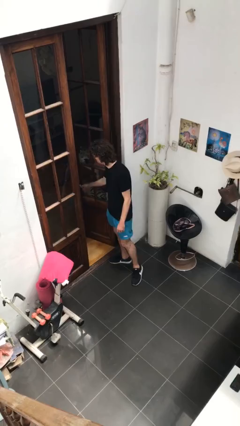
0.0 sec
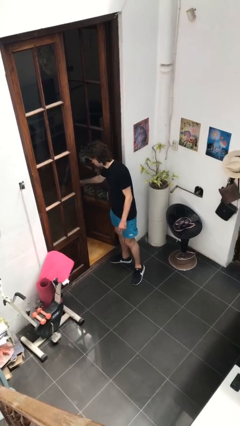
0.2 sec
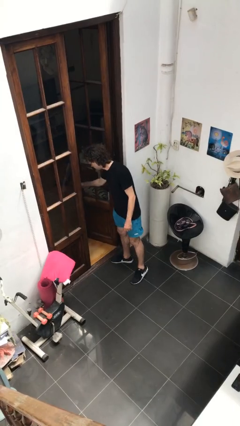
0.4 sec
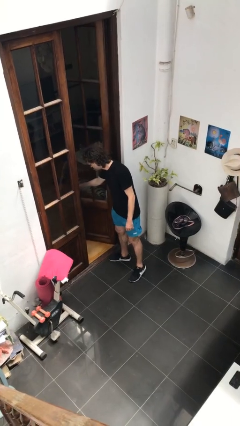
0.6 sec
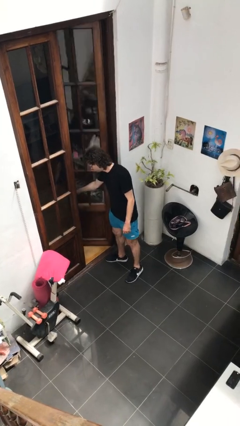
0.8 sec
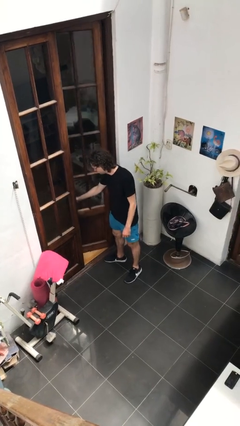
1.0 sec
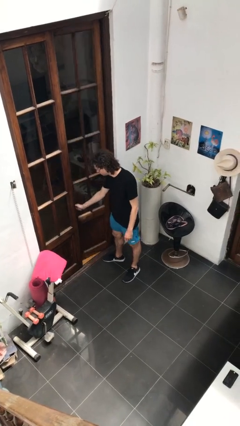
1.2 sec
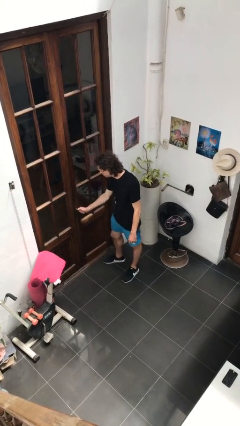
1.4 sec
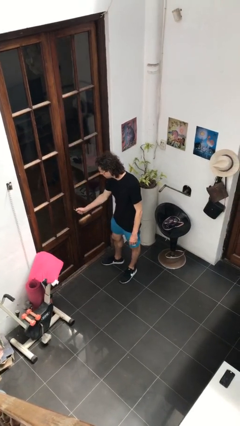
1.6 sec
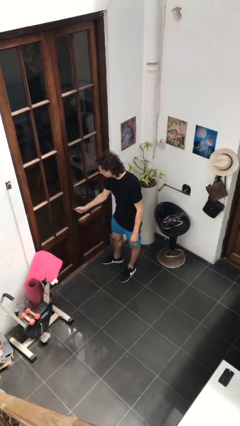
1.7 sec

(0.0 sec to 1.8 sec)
person closes facility door

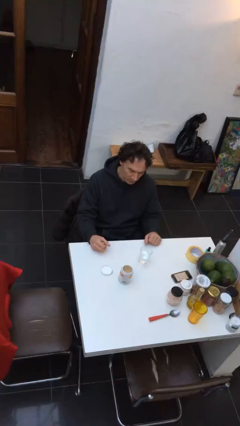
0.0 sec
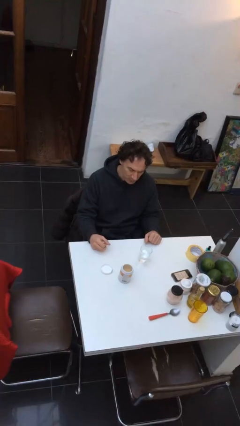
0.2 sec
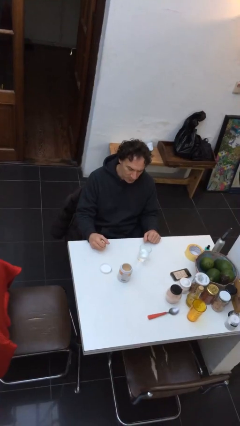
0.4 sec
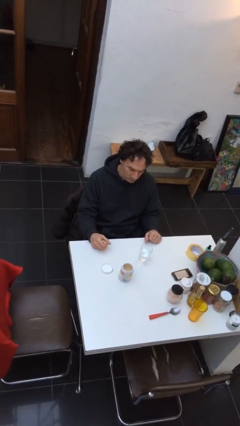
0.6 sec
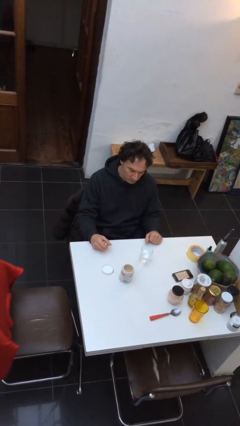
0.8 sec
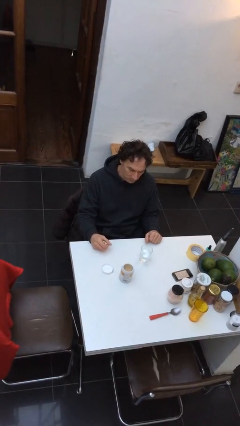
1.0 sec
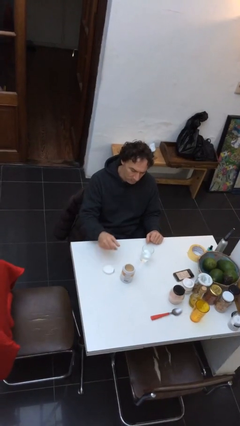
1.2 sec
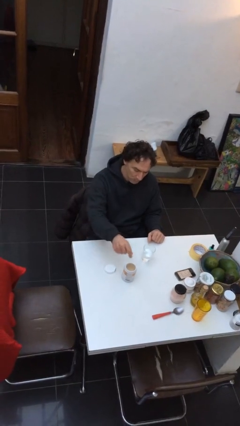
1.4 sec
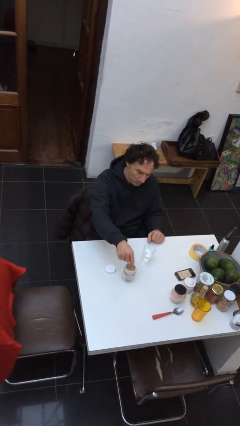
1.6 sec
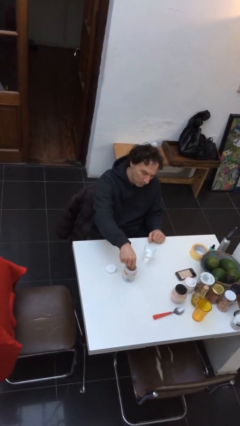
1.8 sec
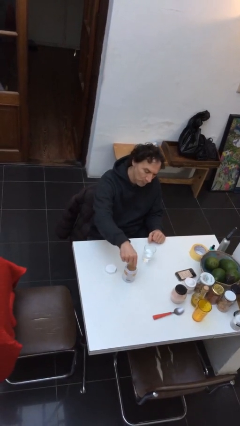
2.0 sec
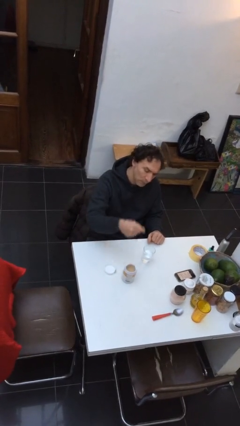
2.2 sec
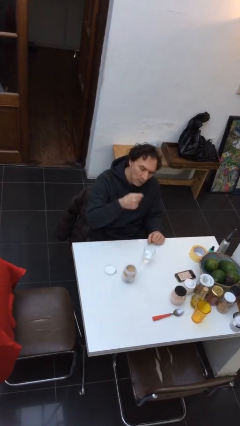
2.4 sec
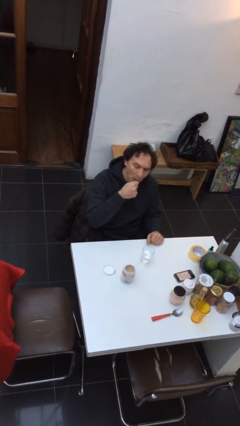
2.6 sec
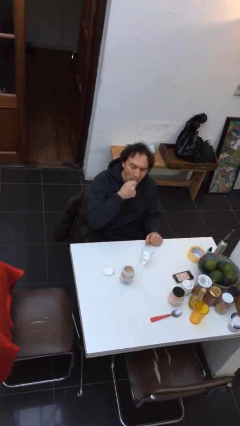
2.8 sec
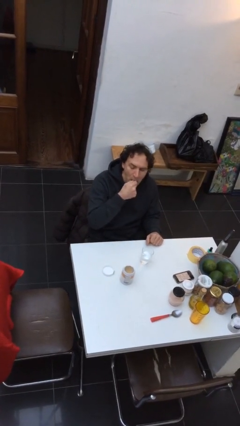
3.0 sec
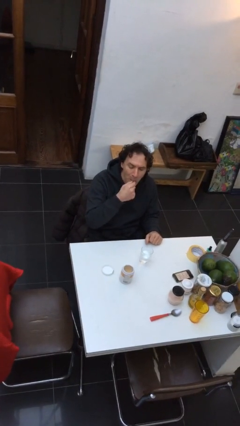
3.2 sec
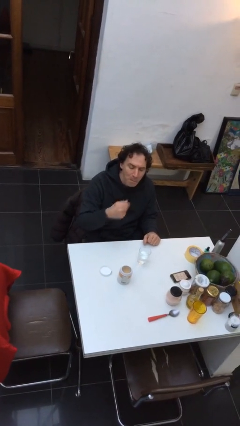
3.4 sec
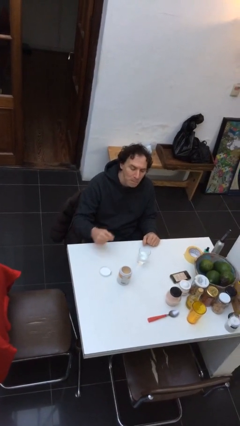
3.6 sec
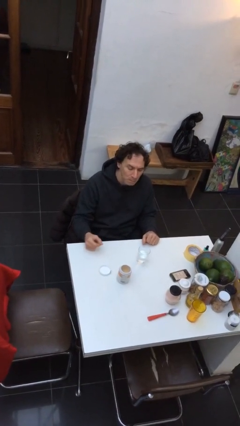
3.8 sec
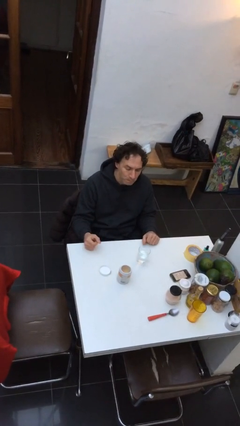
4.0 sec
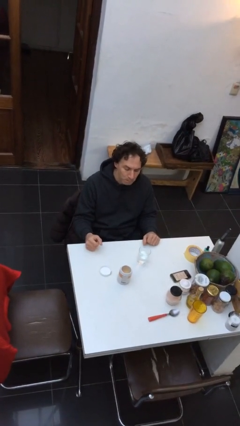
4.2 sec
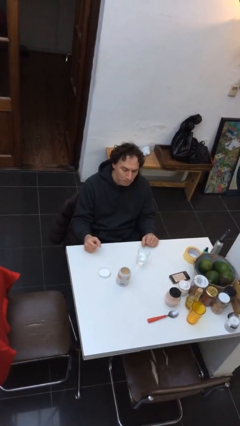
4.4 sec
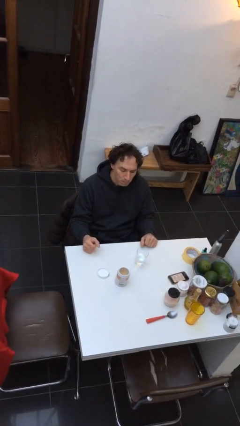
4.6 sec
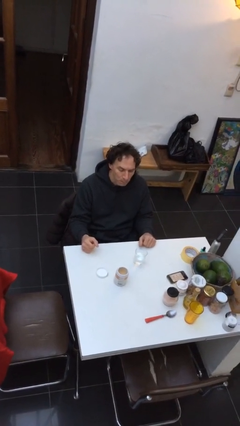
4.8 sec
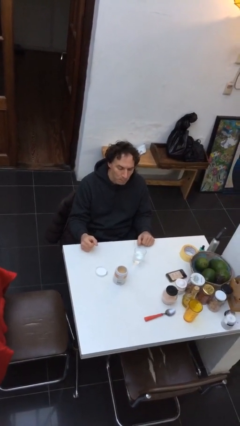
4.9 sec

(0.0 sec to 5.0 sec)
person takes medicine pills

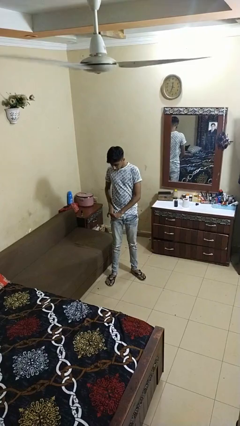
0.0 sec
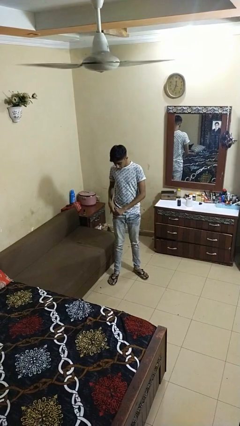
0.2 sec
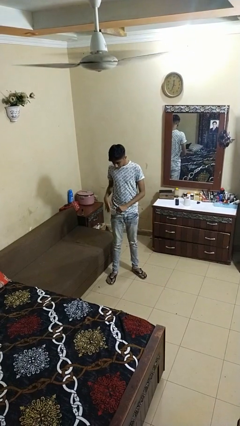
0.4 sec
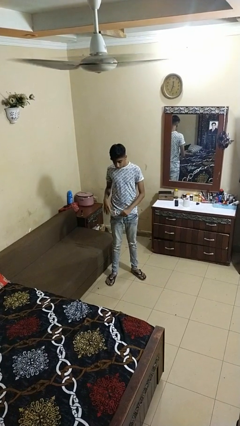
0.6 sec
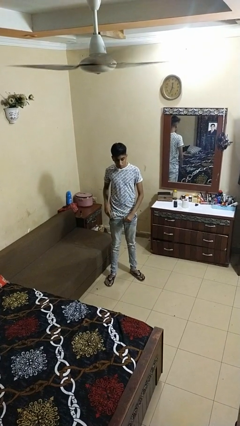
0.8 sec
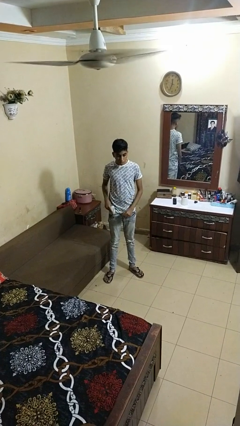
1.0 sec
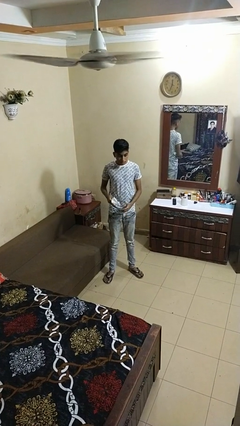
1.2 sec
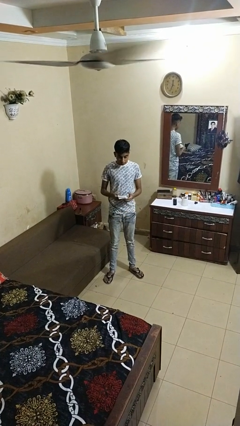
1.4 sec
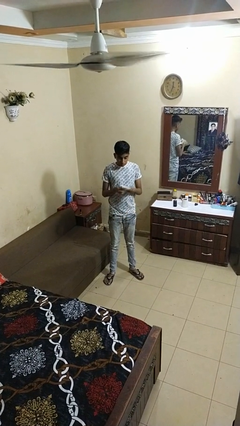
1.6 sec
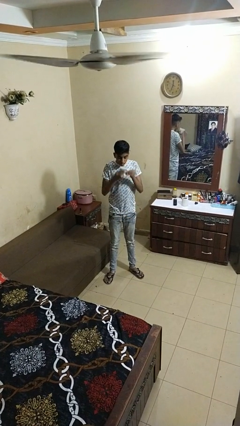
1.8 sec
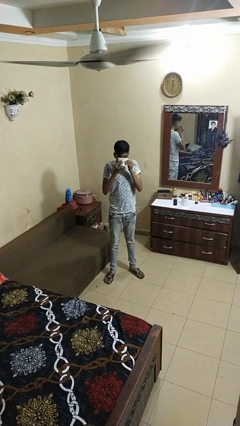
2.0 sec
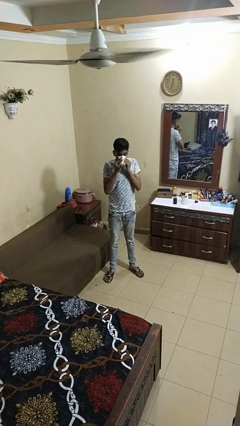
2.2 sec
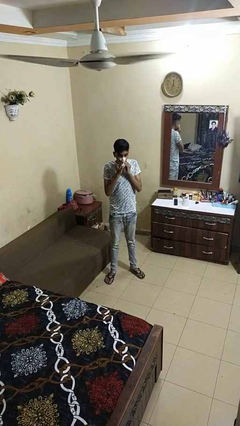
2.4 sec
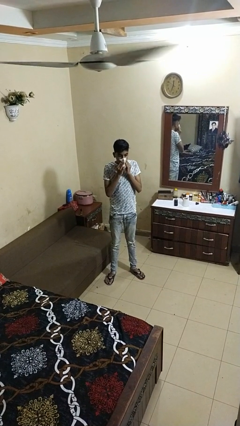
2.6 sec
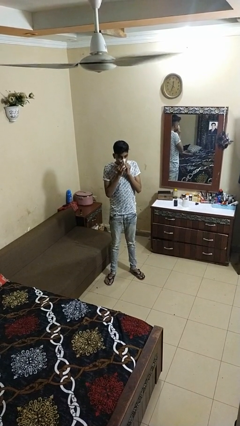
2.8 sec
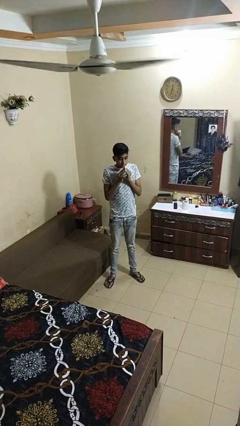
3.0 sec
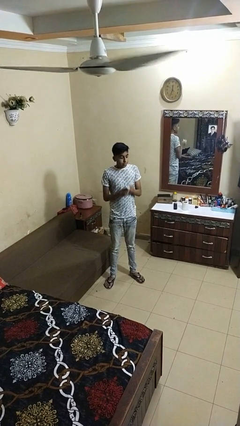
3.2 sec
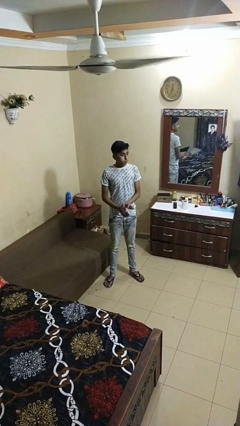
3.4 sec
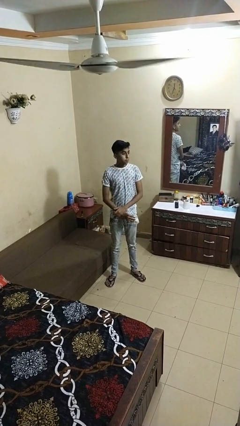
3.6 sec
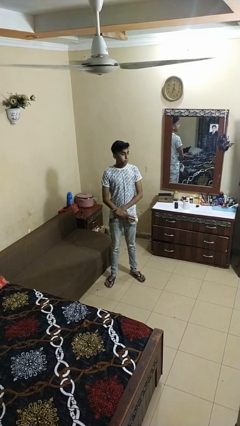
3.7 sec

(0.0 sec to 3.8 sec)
person blows nose

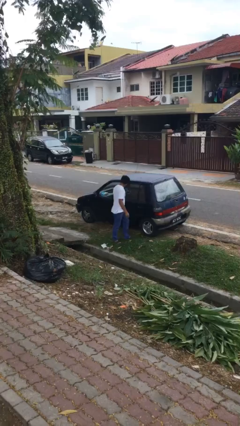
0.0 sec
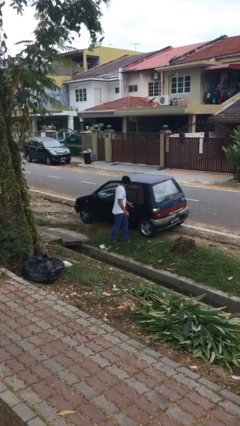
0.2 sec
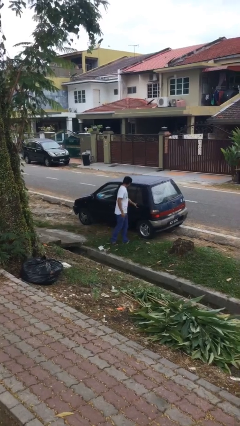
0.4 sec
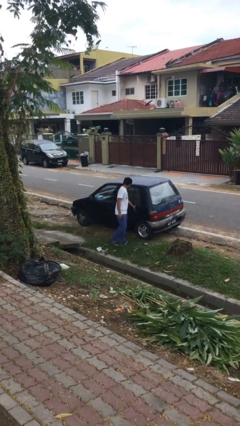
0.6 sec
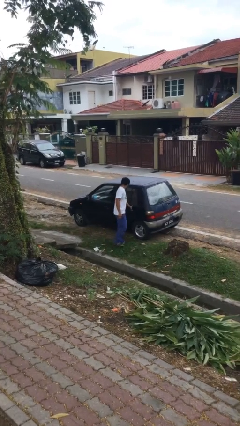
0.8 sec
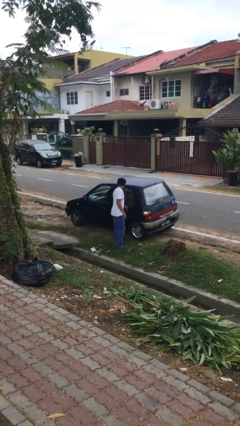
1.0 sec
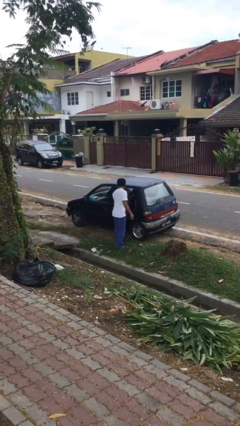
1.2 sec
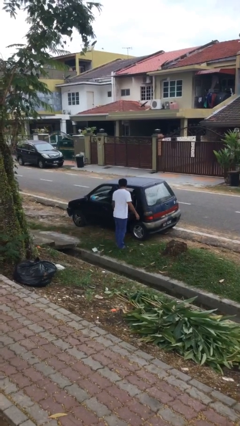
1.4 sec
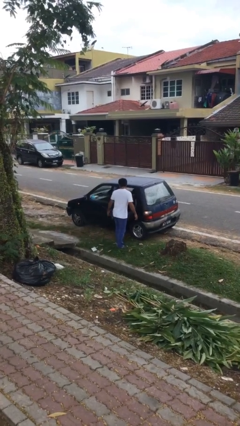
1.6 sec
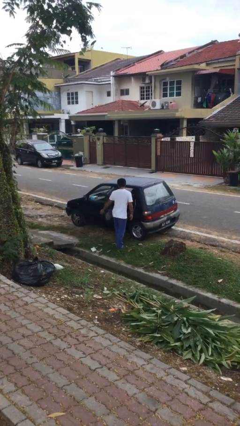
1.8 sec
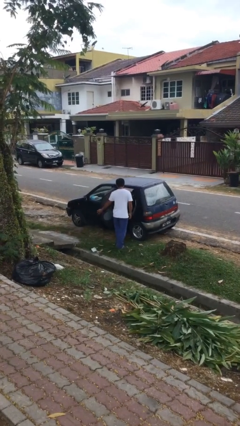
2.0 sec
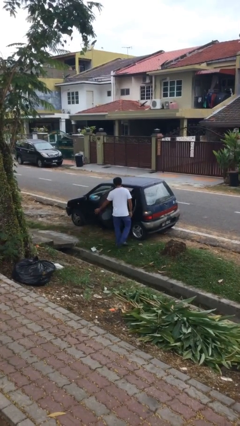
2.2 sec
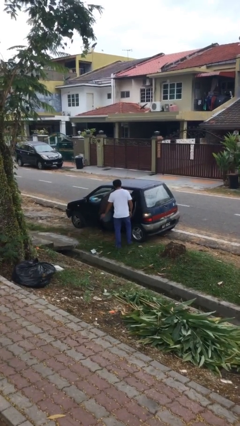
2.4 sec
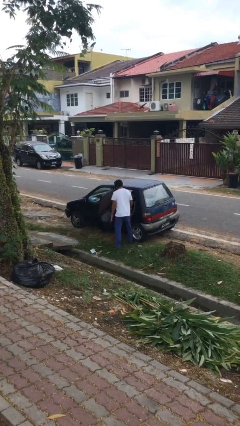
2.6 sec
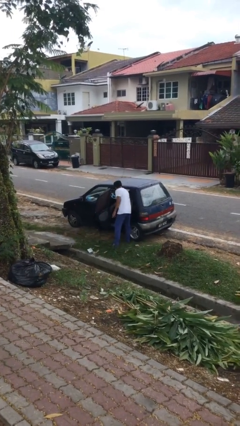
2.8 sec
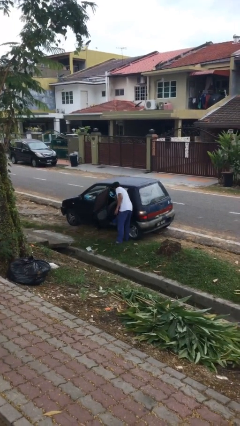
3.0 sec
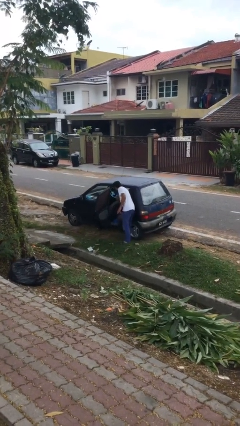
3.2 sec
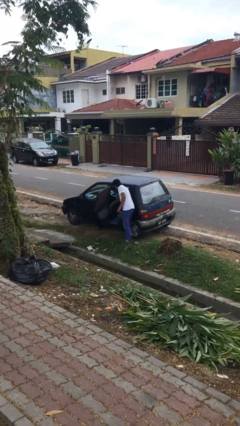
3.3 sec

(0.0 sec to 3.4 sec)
person opens car door

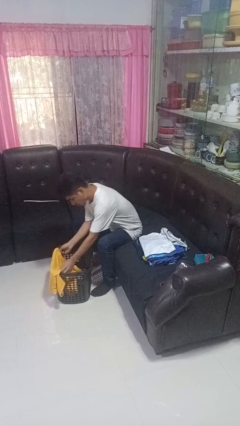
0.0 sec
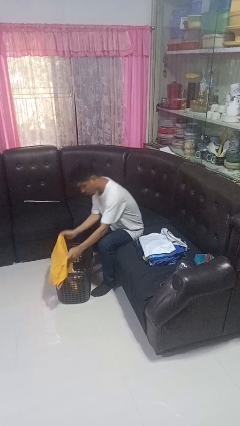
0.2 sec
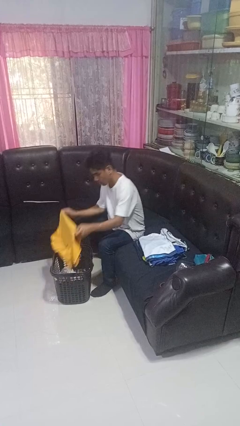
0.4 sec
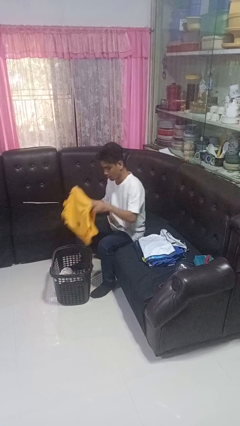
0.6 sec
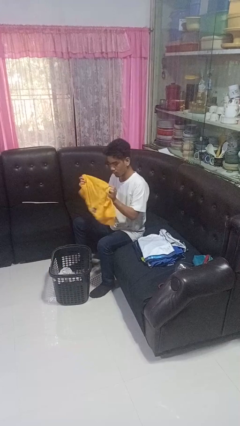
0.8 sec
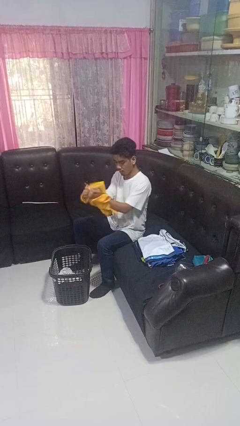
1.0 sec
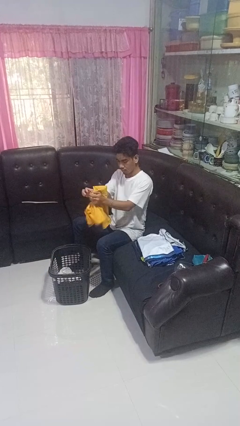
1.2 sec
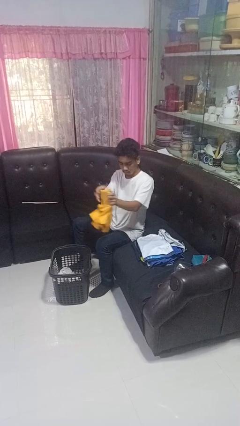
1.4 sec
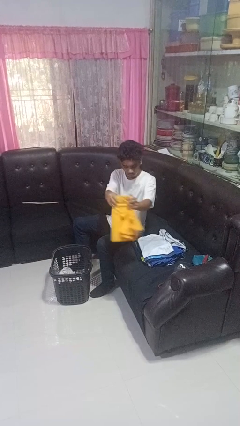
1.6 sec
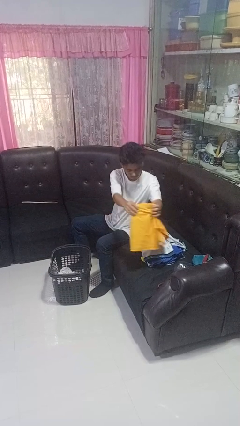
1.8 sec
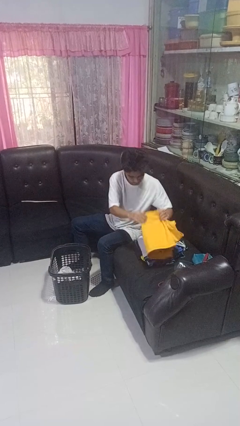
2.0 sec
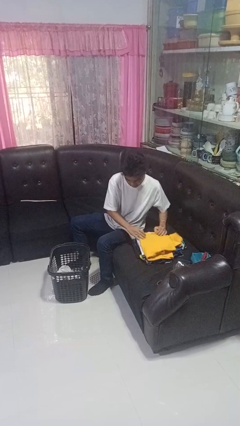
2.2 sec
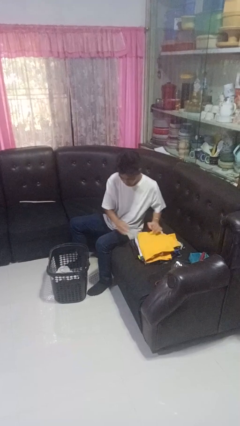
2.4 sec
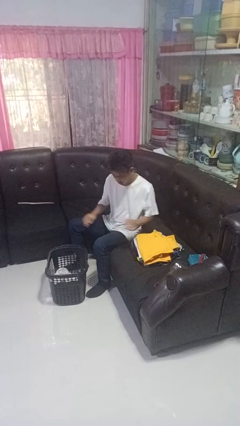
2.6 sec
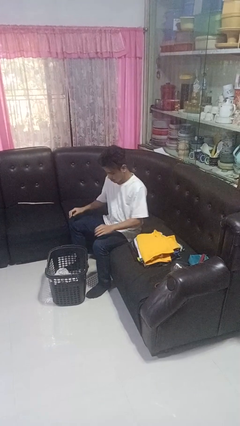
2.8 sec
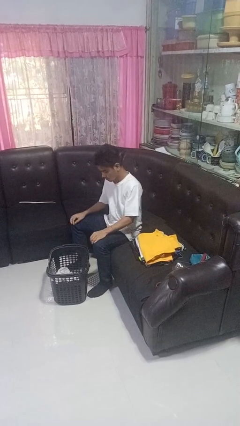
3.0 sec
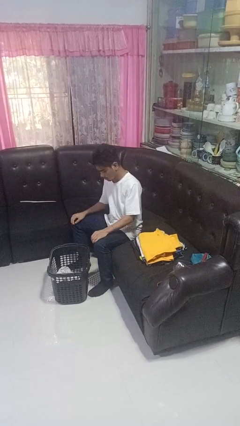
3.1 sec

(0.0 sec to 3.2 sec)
person folds shirt
